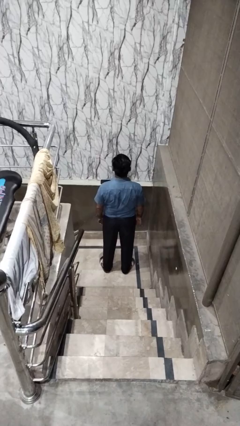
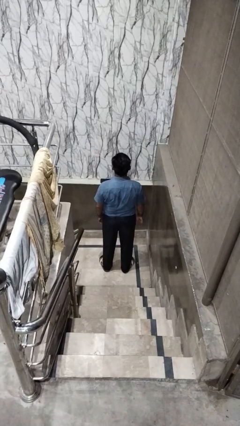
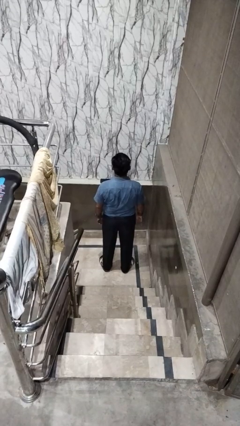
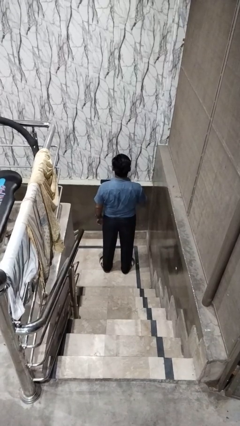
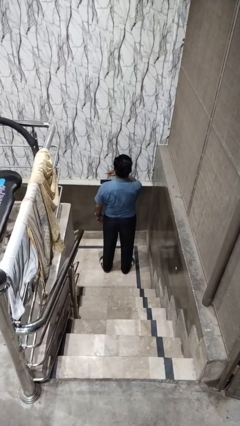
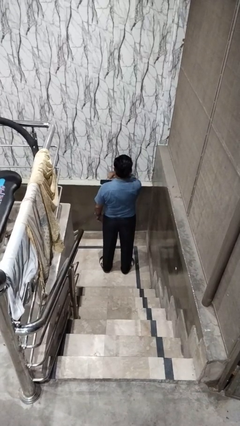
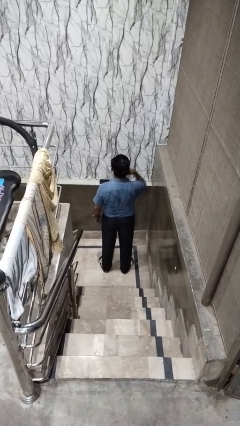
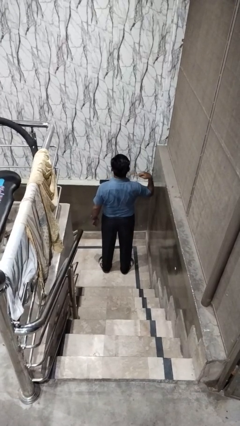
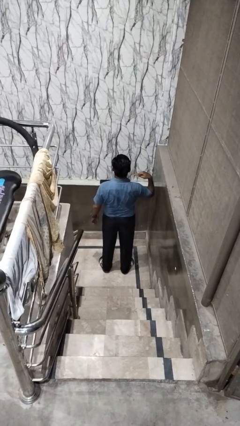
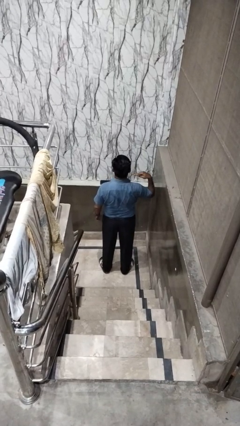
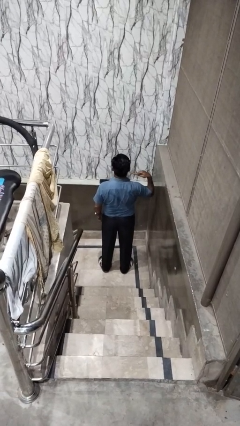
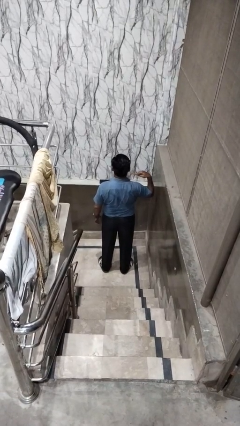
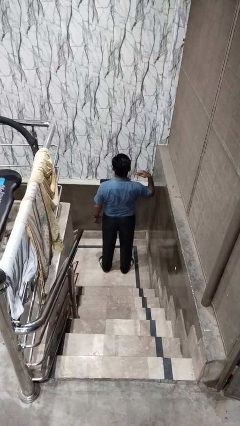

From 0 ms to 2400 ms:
person gestures cut

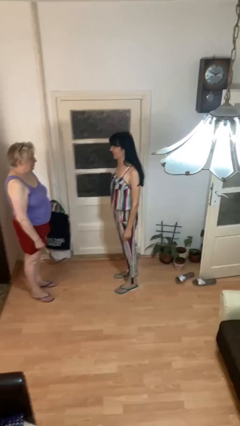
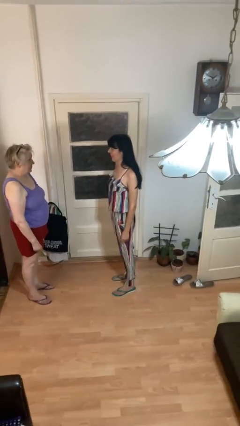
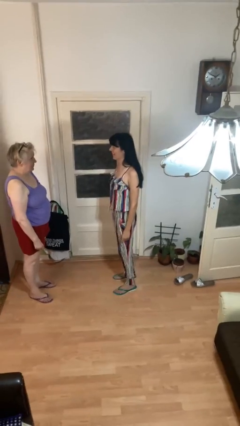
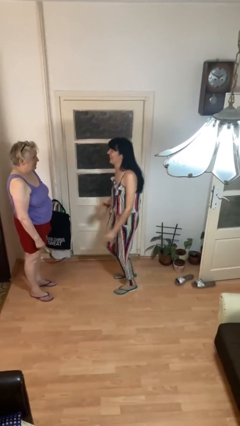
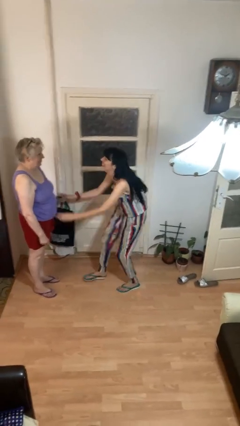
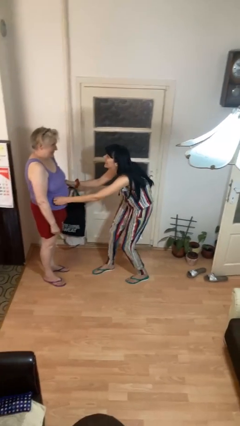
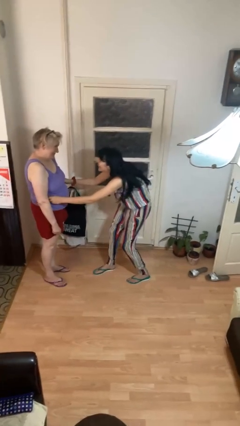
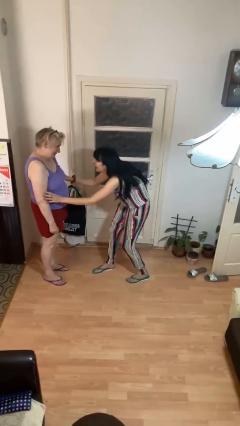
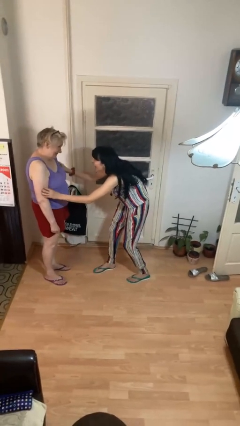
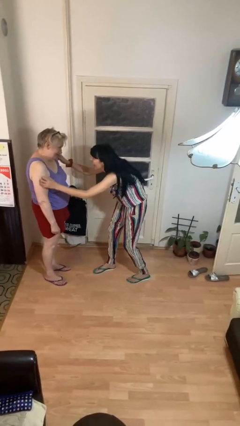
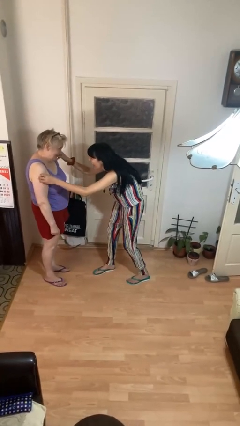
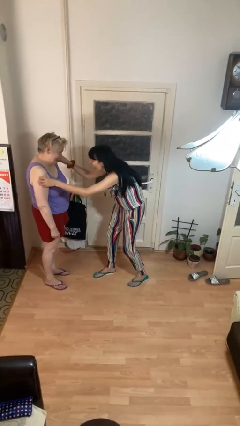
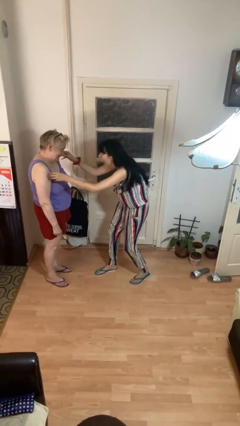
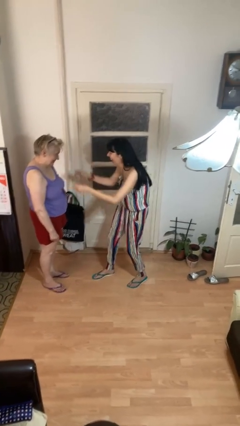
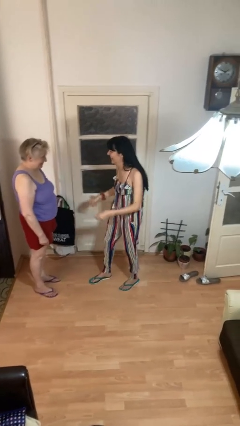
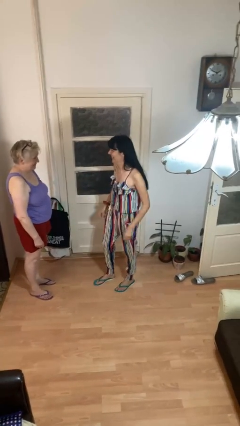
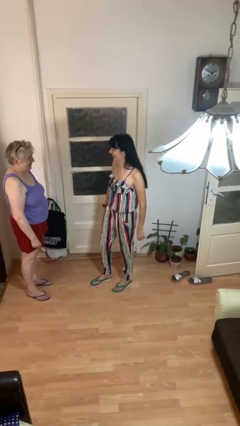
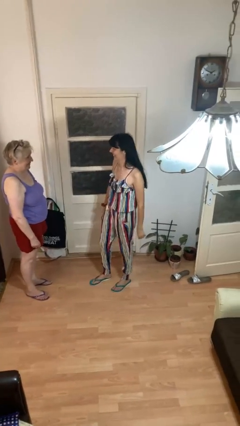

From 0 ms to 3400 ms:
person tickles person

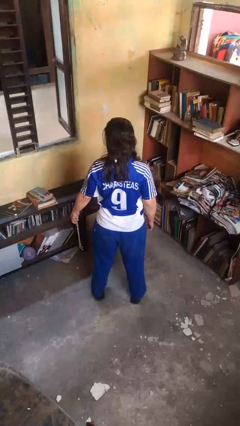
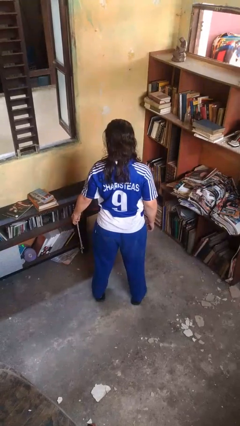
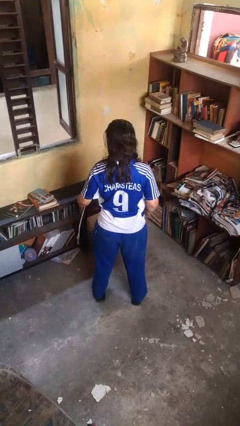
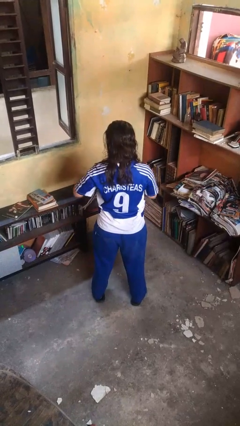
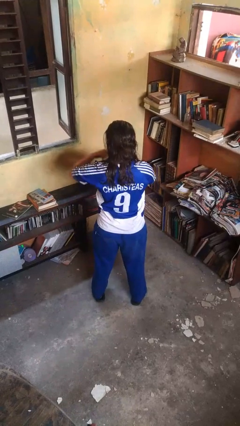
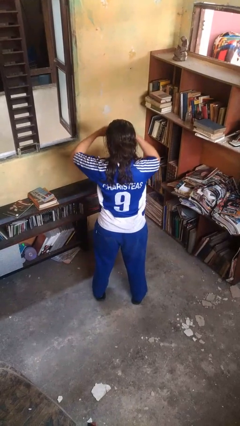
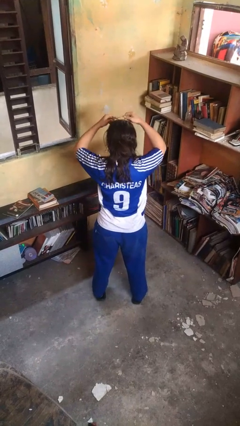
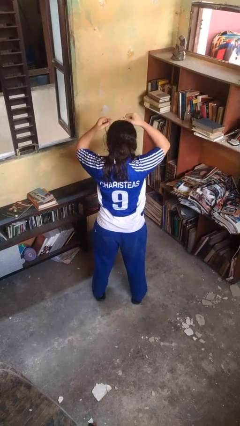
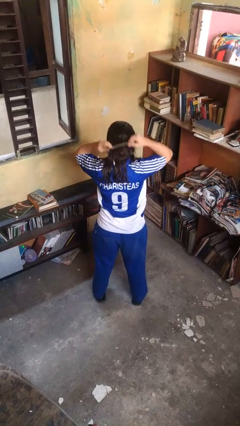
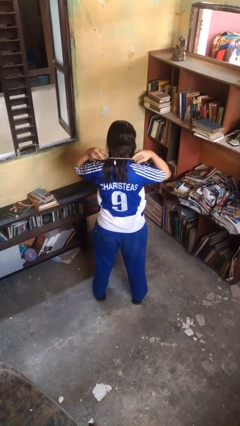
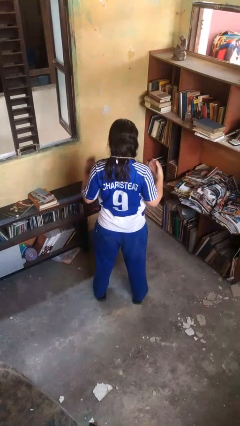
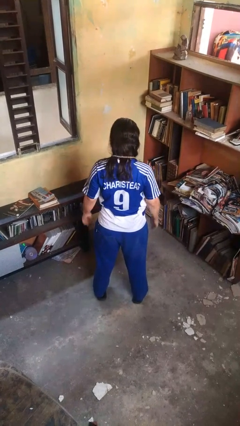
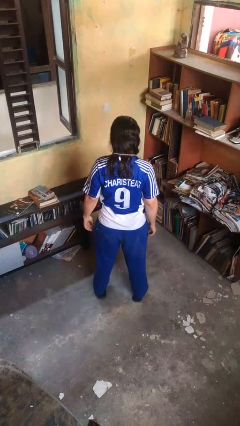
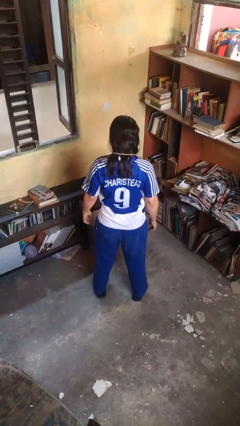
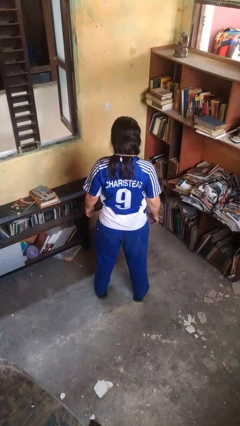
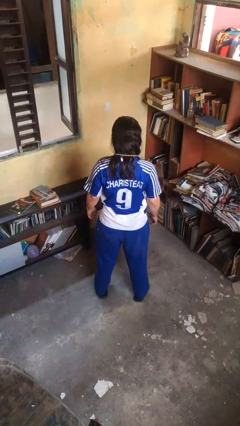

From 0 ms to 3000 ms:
person puts on necklace

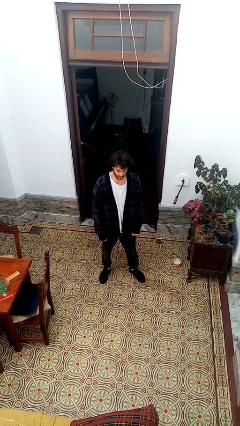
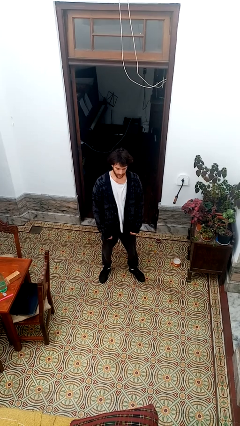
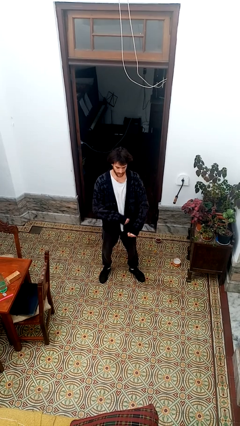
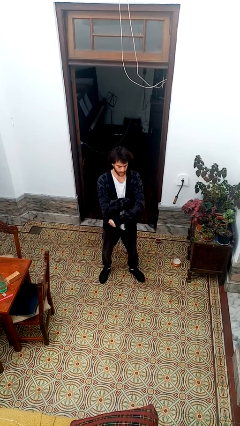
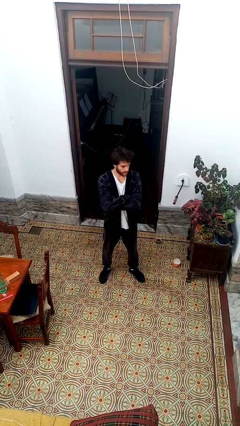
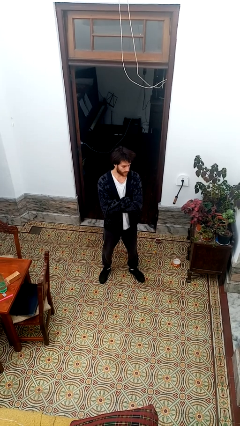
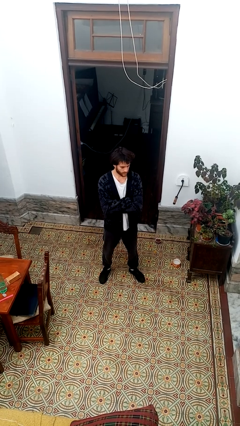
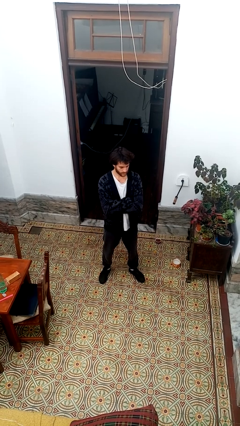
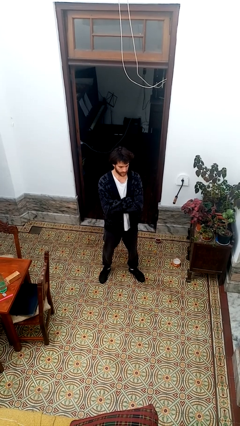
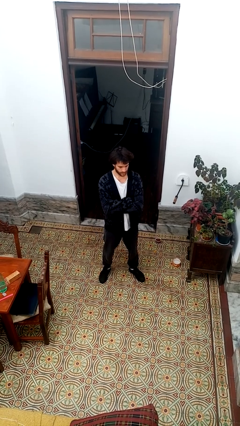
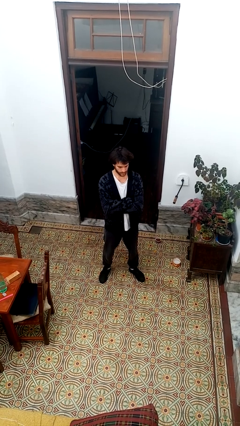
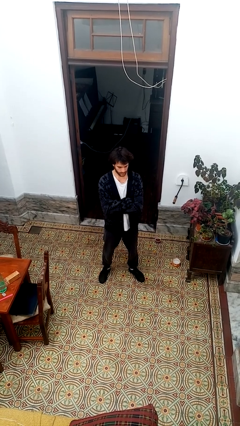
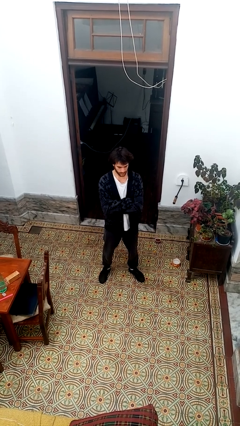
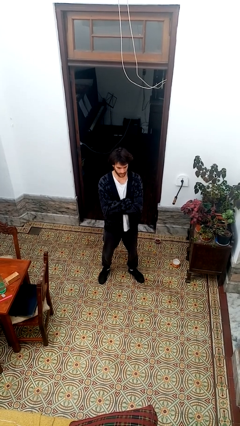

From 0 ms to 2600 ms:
person crosses arms

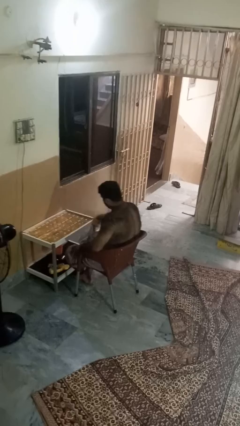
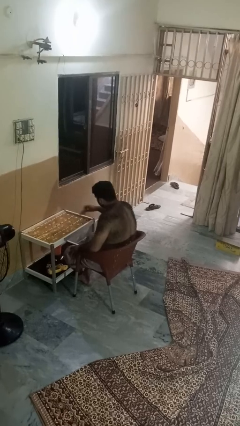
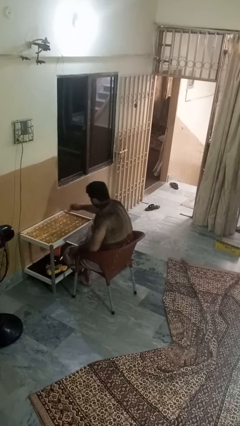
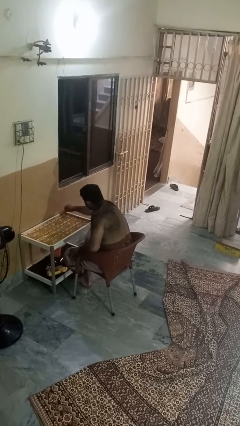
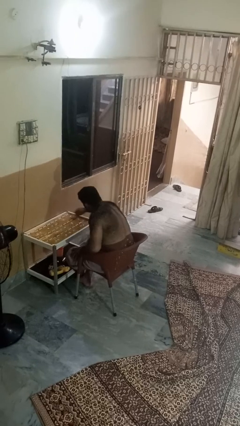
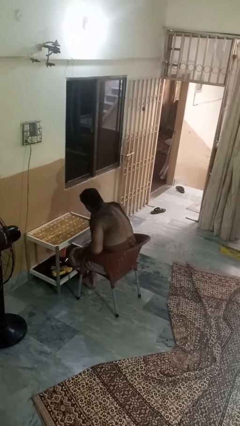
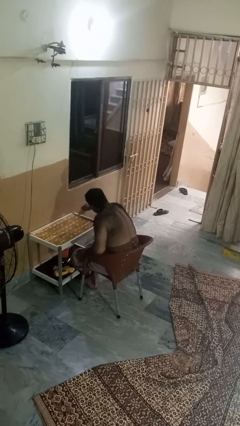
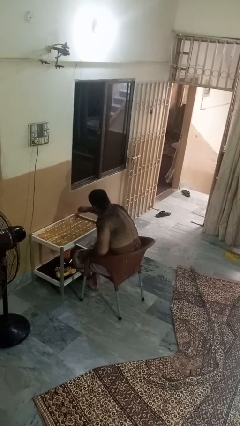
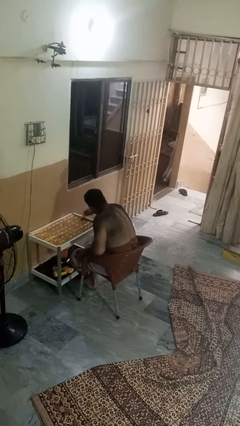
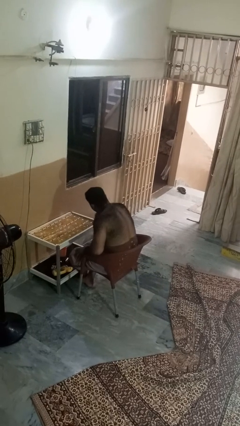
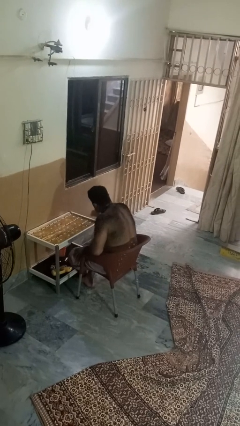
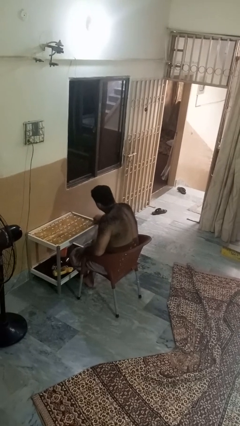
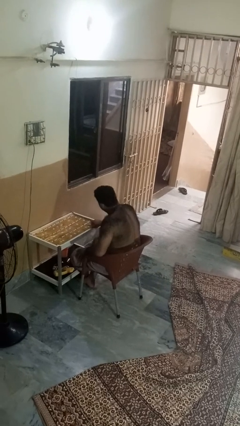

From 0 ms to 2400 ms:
person cleans table with rag

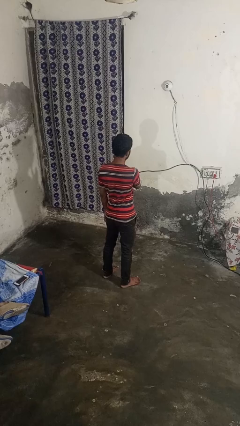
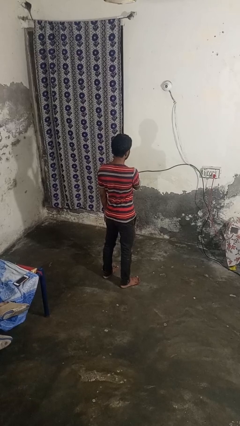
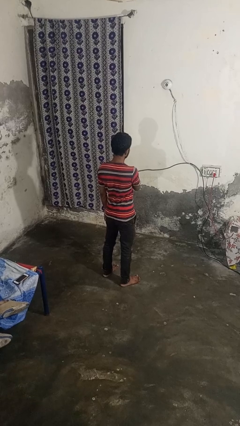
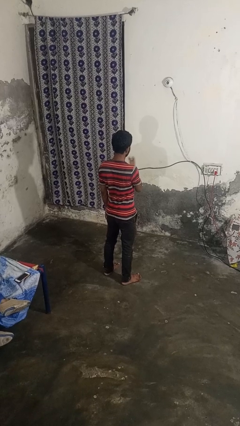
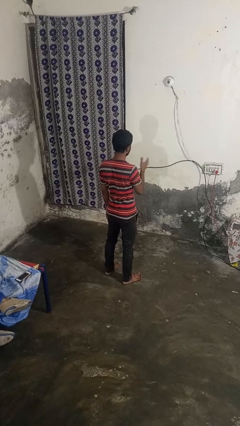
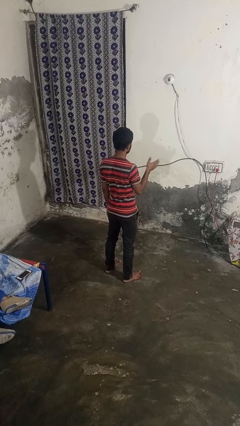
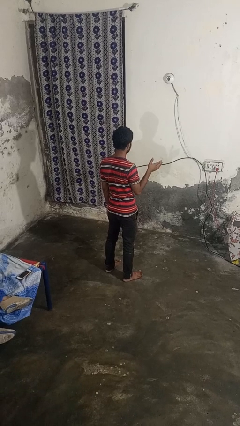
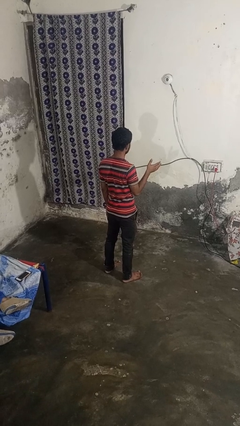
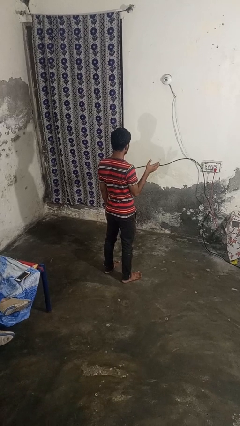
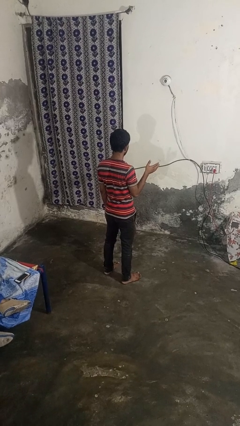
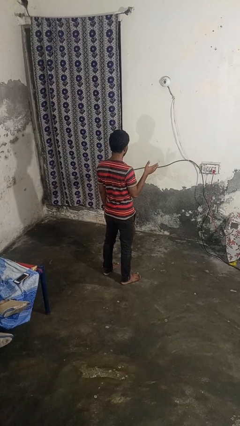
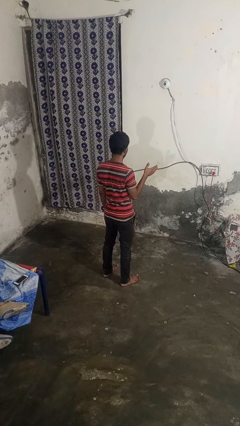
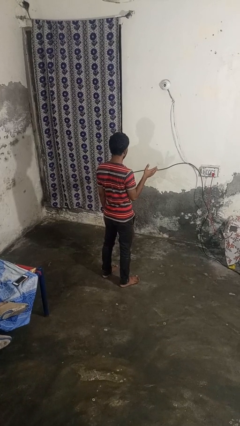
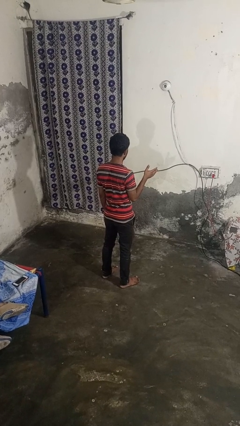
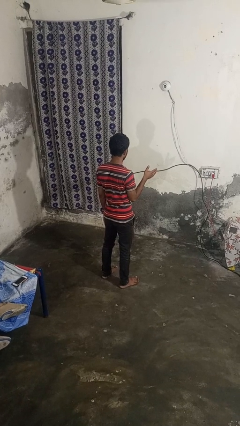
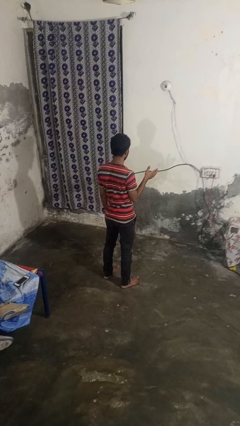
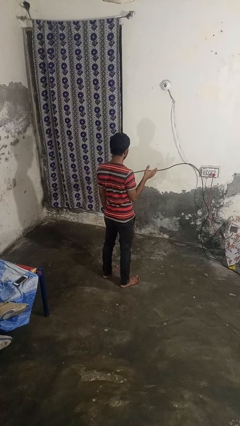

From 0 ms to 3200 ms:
person gestures swipe right

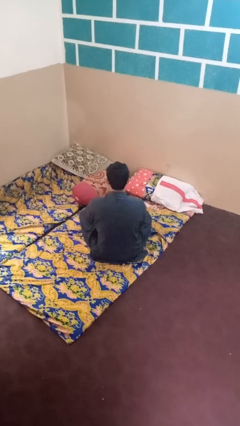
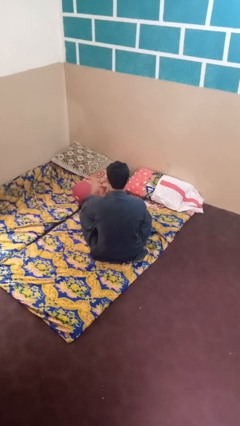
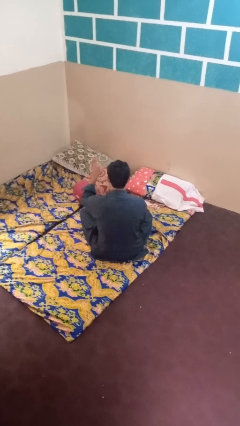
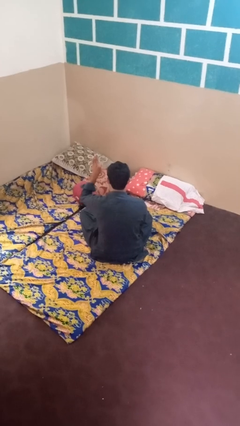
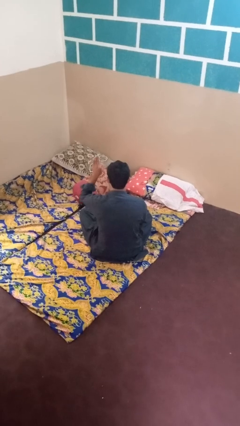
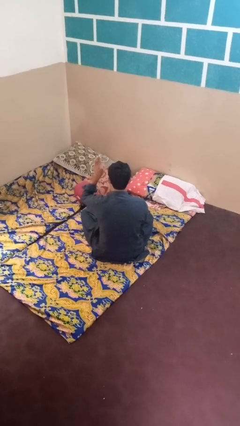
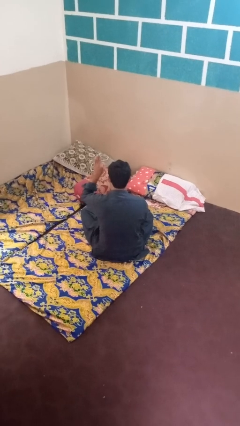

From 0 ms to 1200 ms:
person gestures number three
